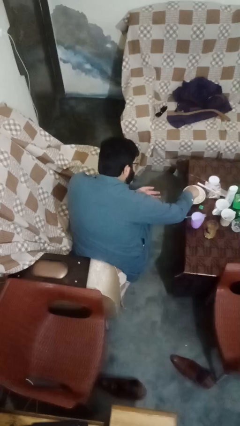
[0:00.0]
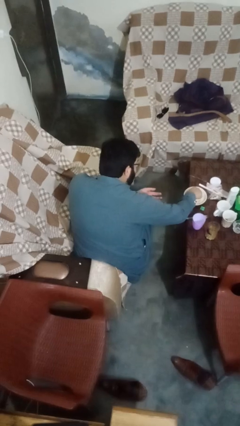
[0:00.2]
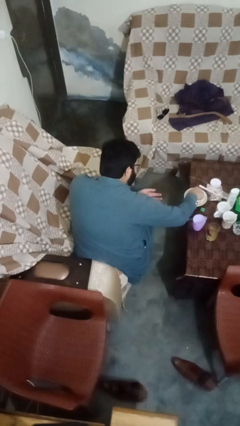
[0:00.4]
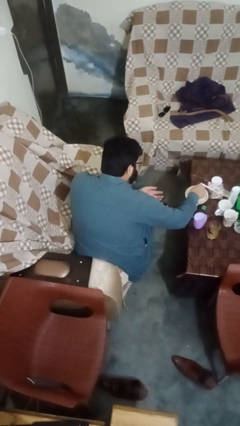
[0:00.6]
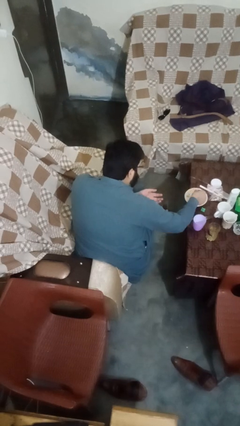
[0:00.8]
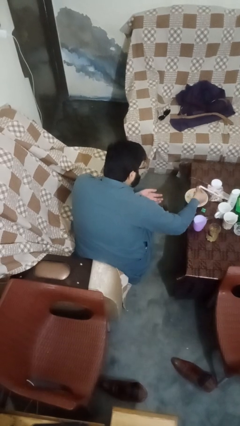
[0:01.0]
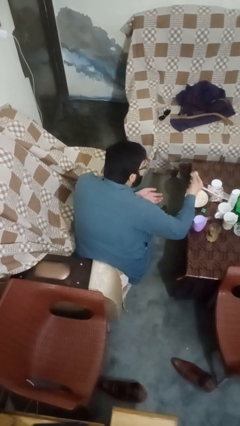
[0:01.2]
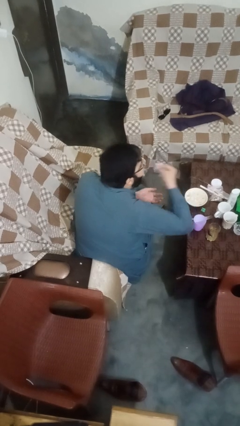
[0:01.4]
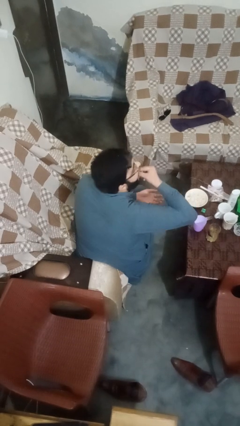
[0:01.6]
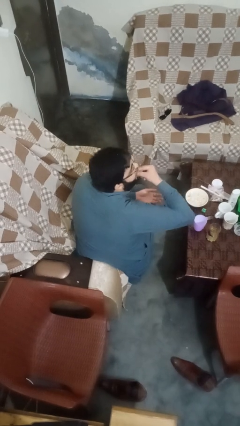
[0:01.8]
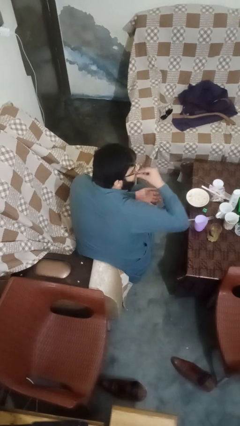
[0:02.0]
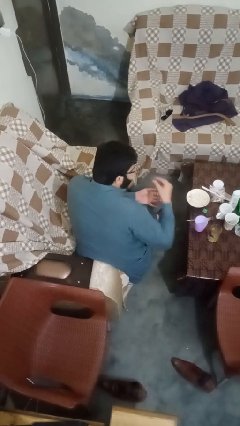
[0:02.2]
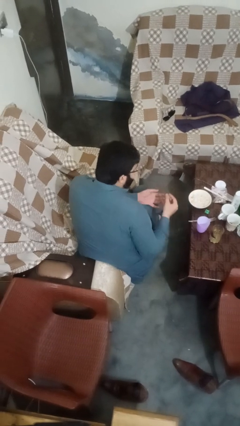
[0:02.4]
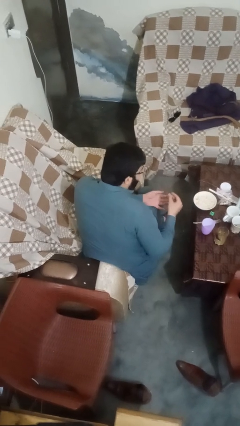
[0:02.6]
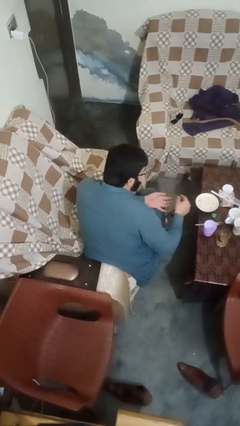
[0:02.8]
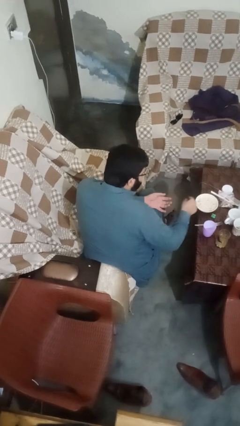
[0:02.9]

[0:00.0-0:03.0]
person eats with hands

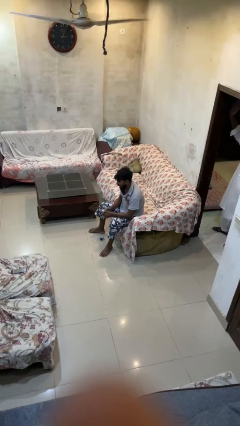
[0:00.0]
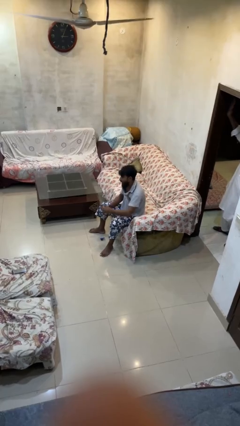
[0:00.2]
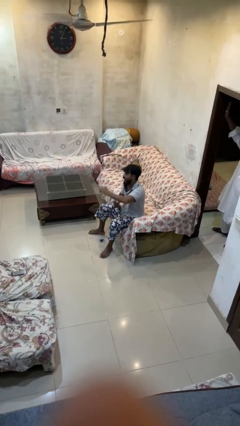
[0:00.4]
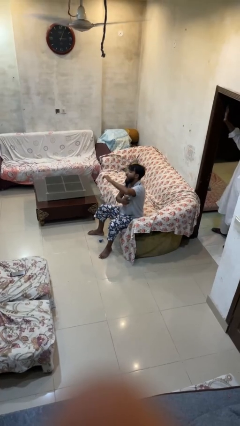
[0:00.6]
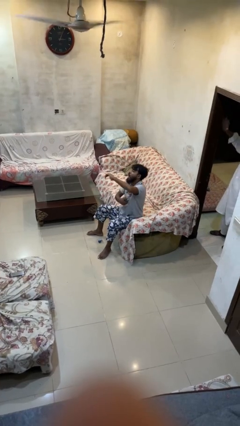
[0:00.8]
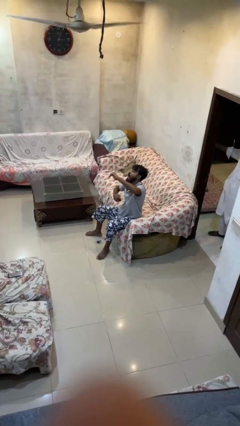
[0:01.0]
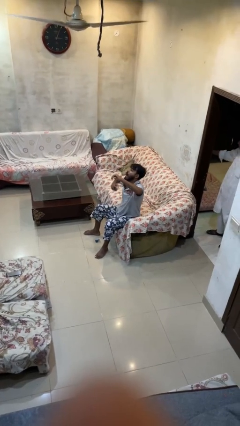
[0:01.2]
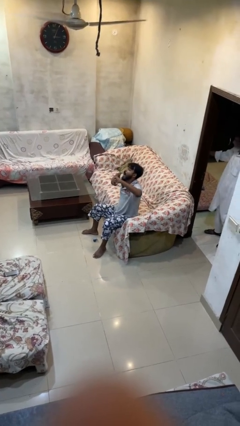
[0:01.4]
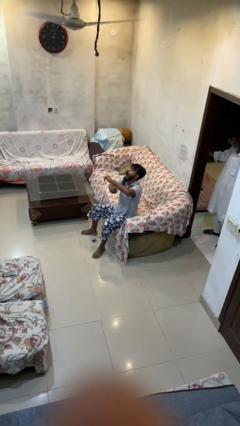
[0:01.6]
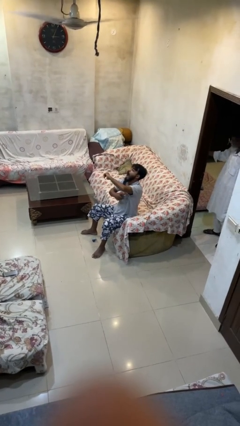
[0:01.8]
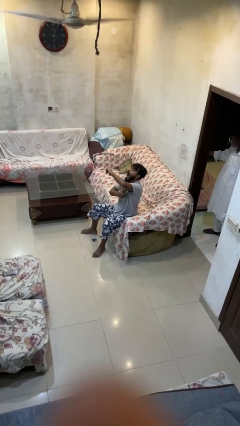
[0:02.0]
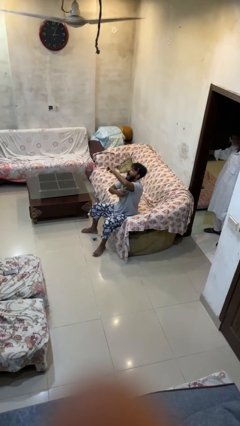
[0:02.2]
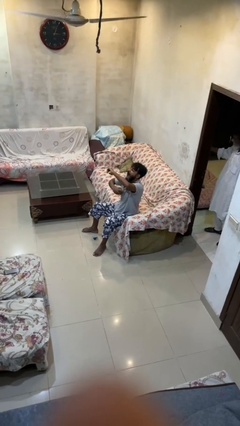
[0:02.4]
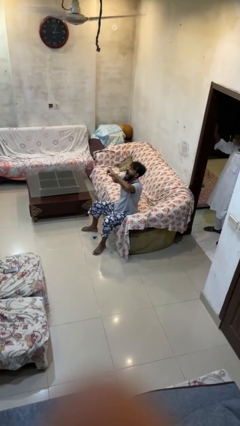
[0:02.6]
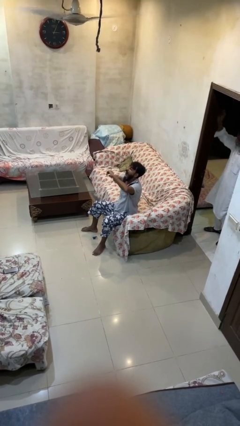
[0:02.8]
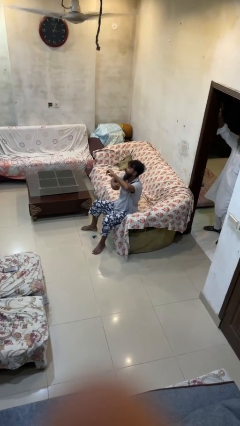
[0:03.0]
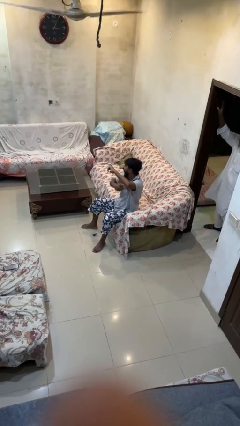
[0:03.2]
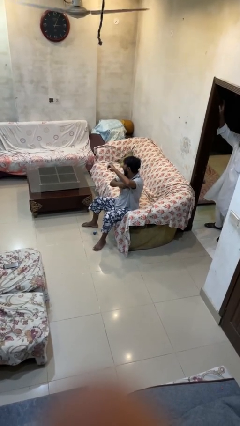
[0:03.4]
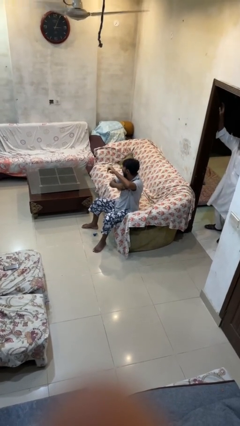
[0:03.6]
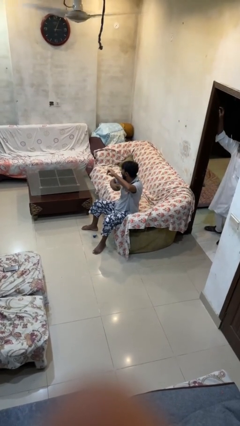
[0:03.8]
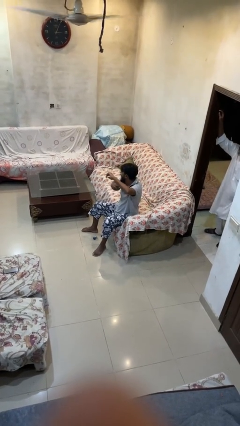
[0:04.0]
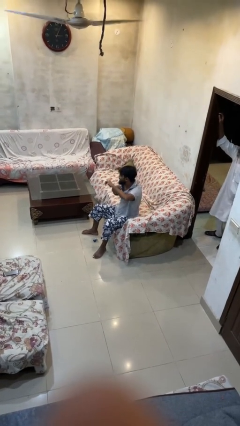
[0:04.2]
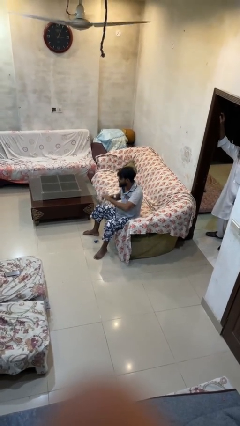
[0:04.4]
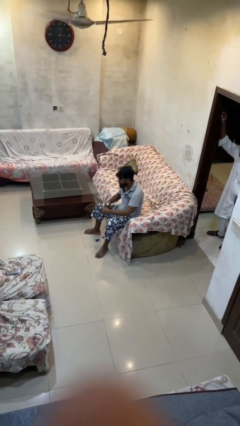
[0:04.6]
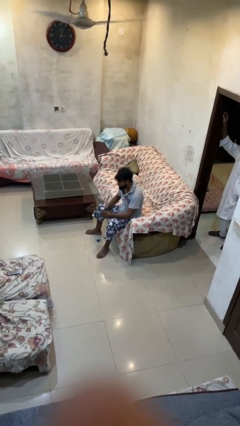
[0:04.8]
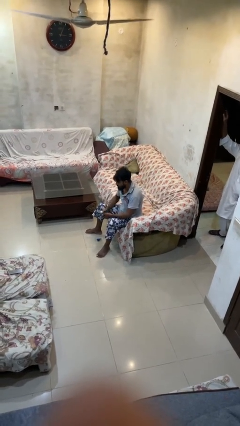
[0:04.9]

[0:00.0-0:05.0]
person applies deodorant

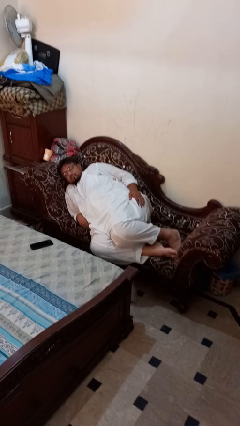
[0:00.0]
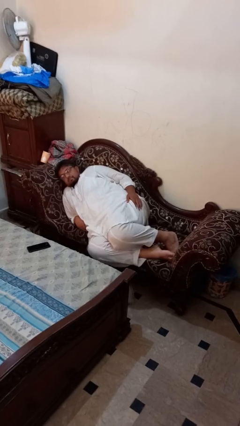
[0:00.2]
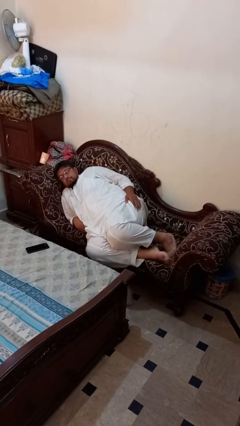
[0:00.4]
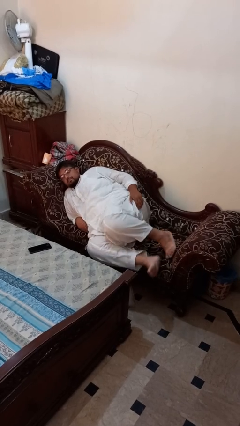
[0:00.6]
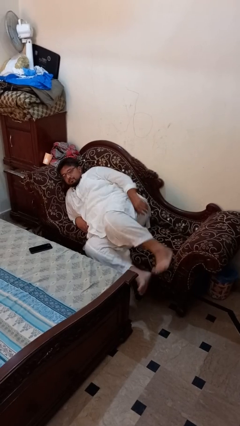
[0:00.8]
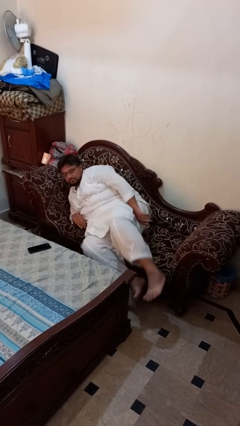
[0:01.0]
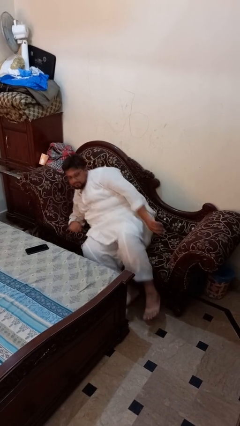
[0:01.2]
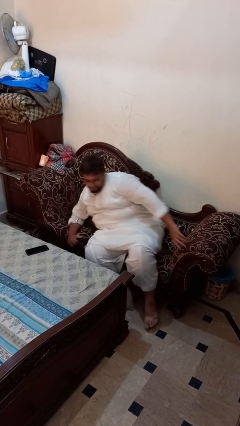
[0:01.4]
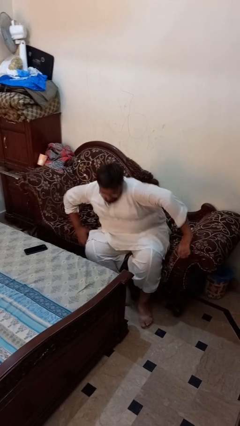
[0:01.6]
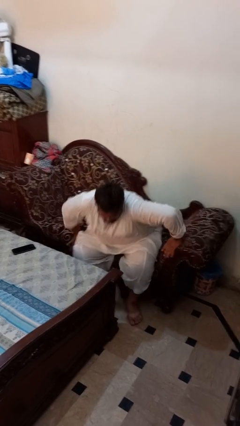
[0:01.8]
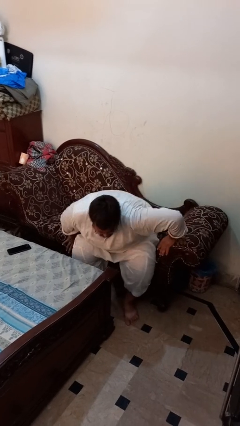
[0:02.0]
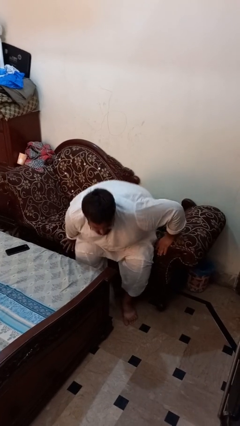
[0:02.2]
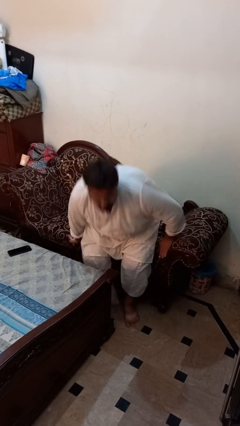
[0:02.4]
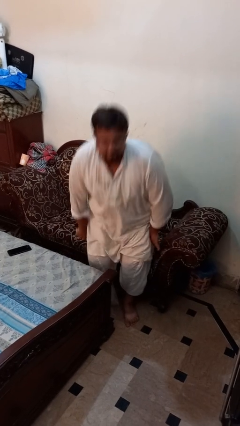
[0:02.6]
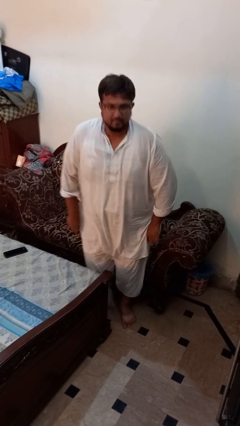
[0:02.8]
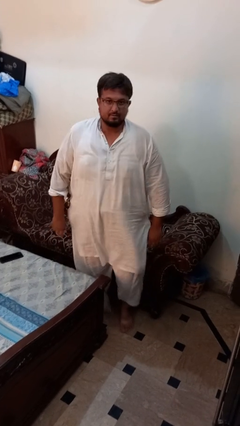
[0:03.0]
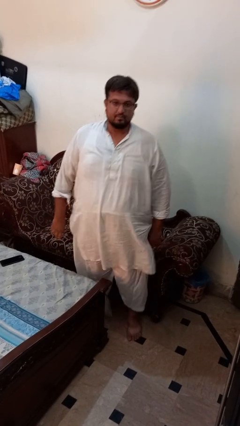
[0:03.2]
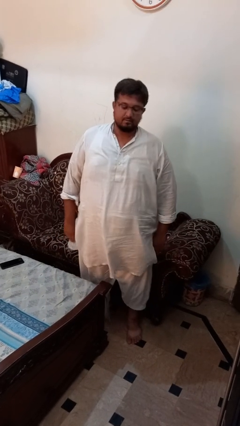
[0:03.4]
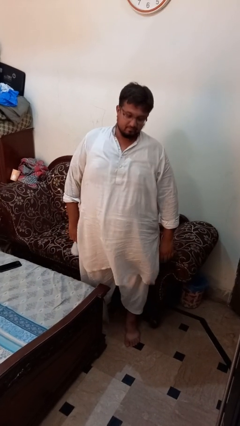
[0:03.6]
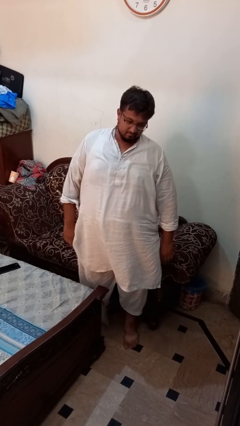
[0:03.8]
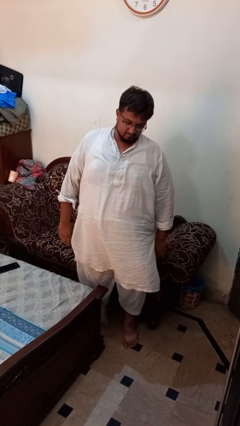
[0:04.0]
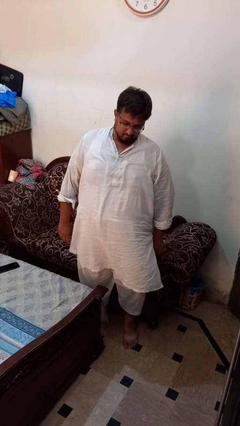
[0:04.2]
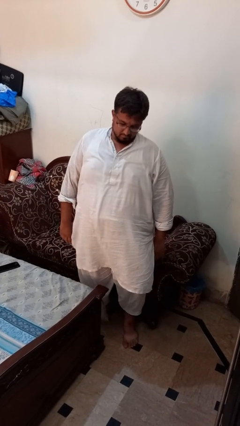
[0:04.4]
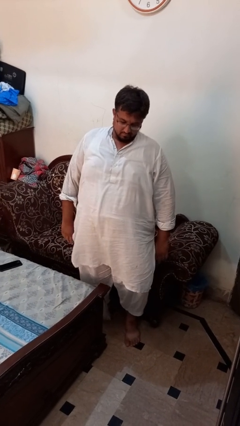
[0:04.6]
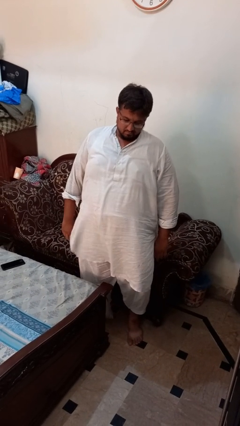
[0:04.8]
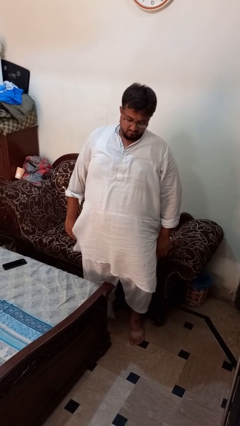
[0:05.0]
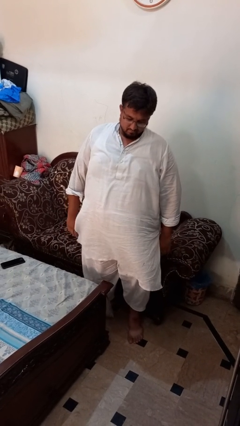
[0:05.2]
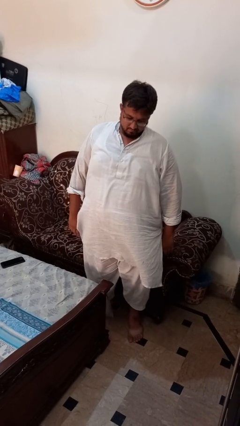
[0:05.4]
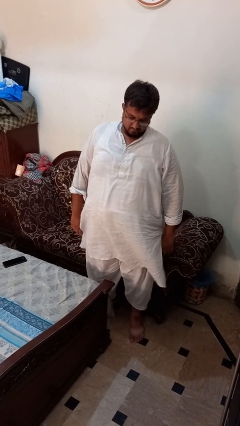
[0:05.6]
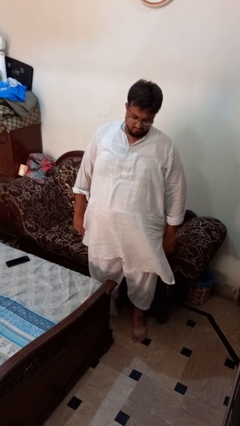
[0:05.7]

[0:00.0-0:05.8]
person stands up

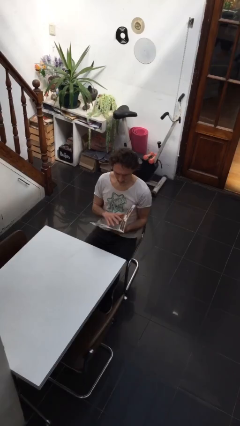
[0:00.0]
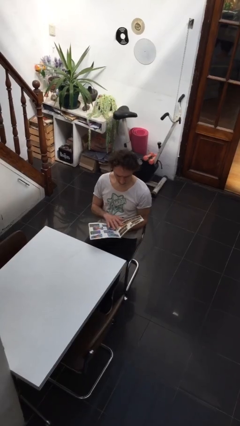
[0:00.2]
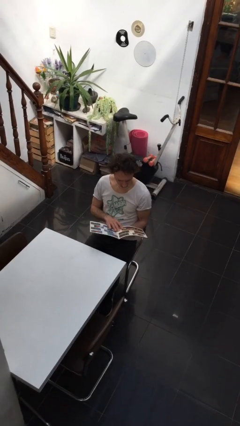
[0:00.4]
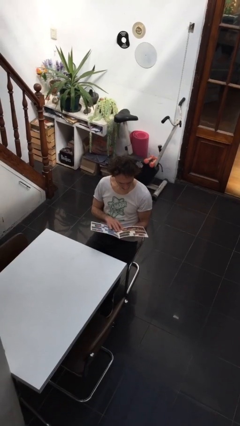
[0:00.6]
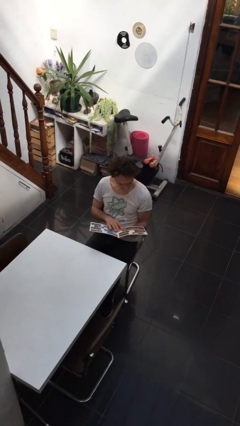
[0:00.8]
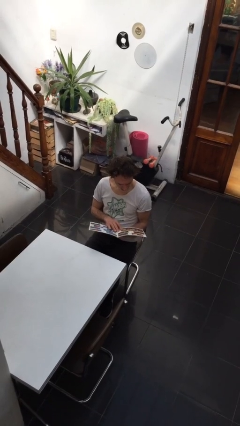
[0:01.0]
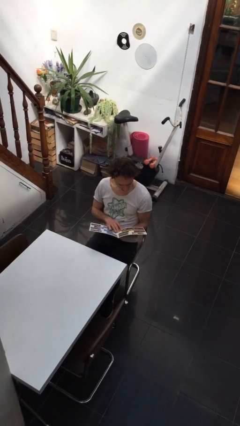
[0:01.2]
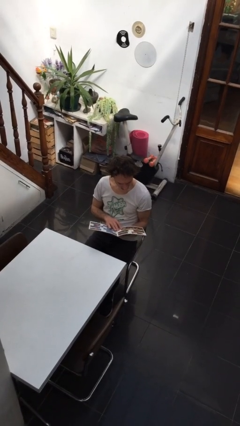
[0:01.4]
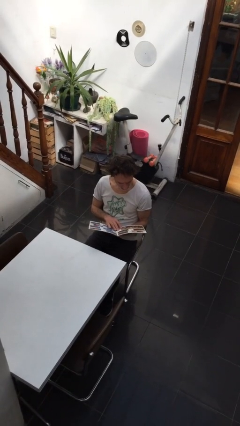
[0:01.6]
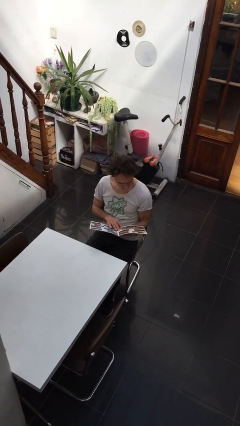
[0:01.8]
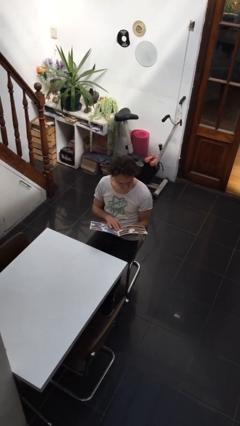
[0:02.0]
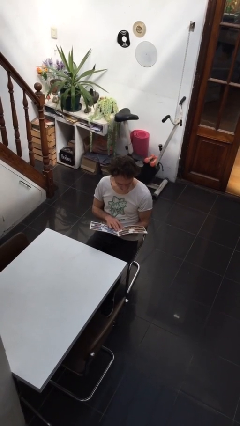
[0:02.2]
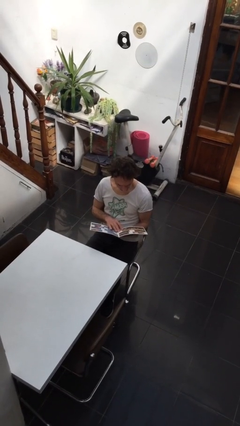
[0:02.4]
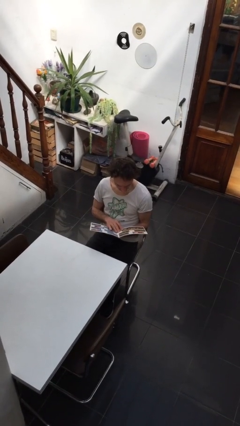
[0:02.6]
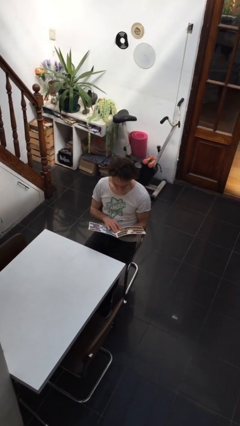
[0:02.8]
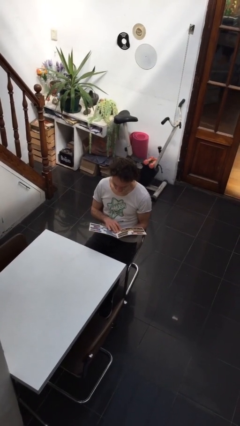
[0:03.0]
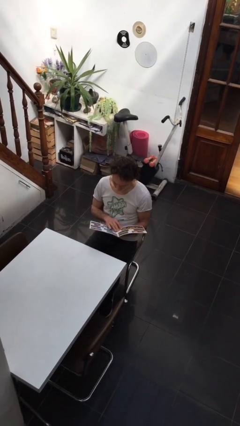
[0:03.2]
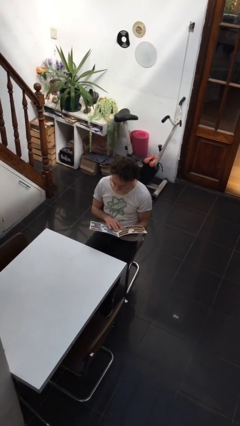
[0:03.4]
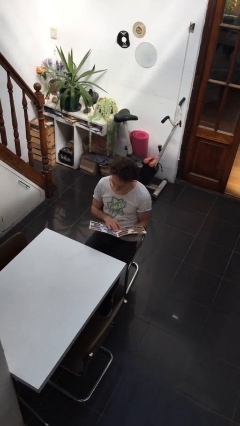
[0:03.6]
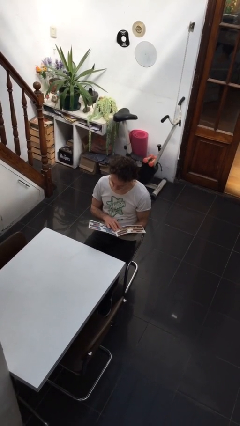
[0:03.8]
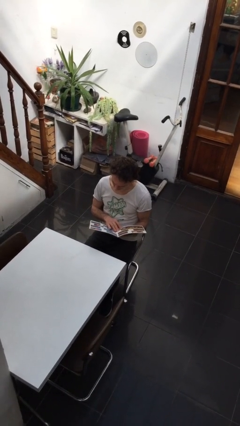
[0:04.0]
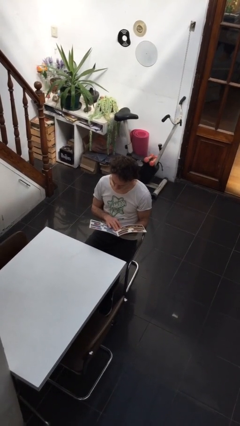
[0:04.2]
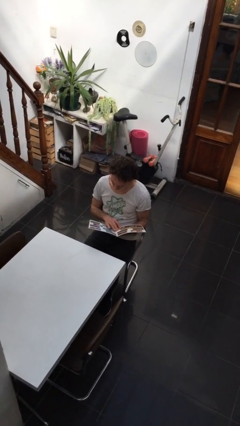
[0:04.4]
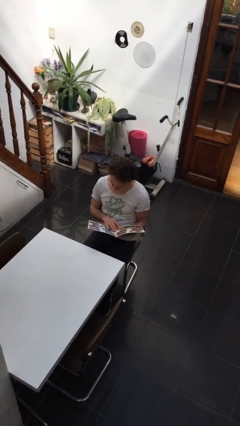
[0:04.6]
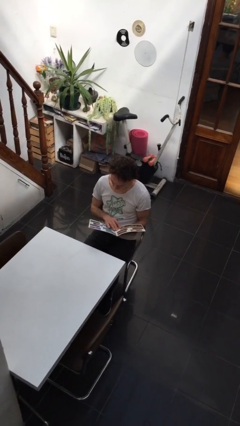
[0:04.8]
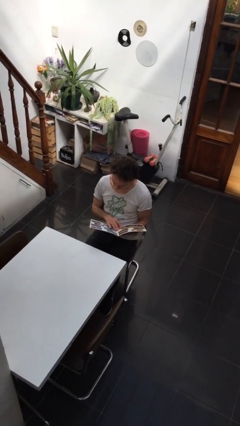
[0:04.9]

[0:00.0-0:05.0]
person reads document
